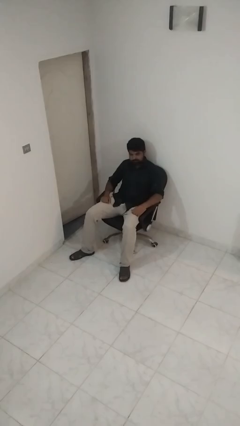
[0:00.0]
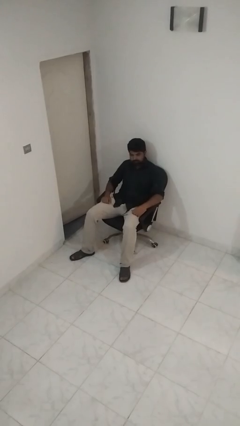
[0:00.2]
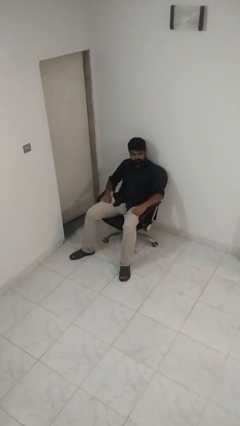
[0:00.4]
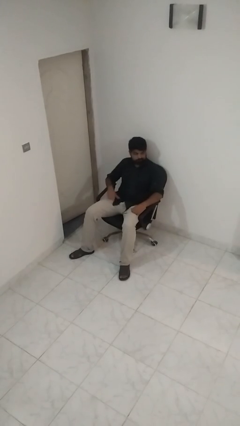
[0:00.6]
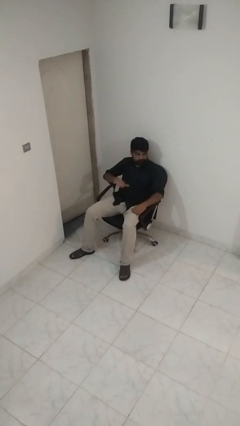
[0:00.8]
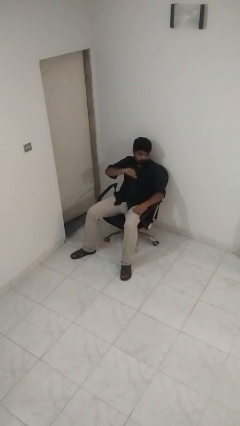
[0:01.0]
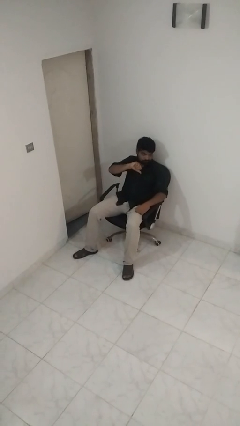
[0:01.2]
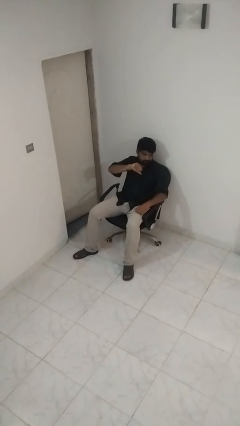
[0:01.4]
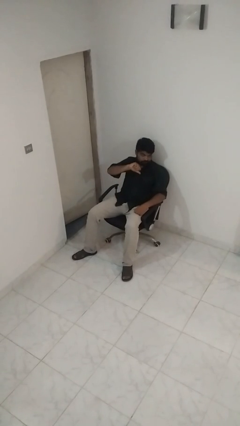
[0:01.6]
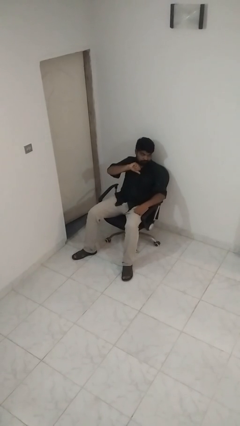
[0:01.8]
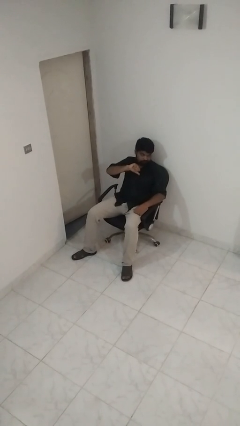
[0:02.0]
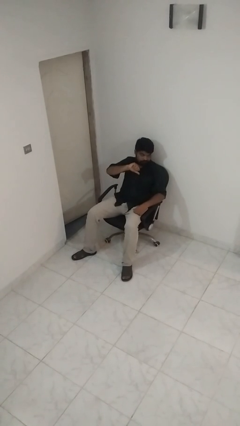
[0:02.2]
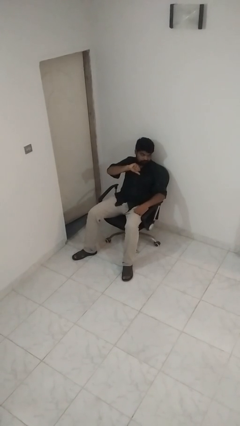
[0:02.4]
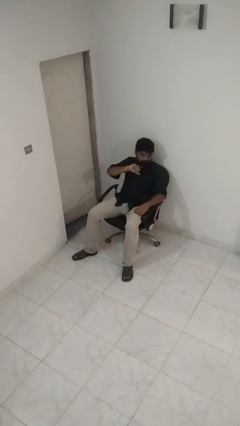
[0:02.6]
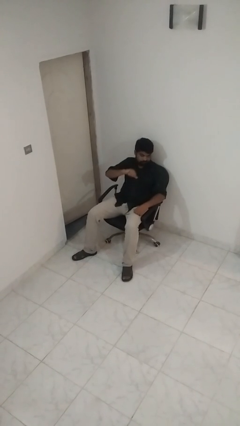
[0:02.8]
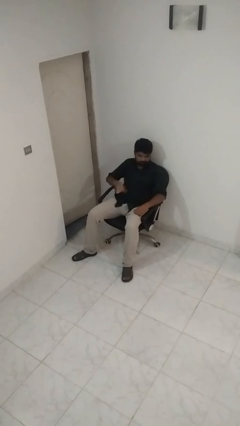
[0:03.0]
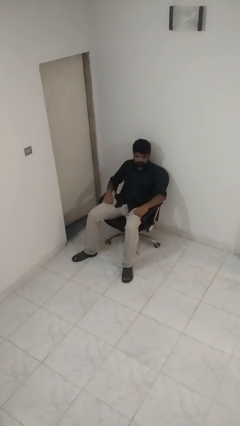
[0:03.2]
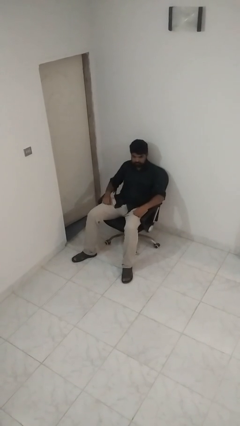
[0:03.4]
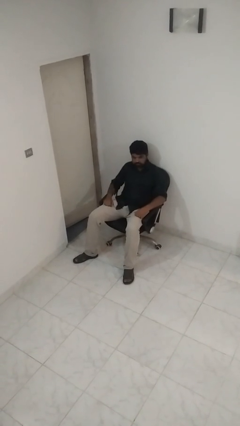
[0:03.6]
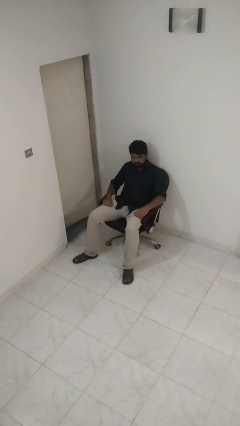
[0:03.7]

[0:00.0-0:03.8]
person gestures thumbs down

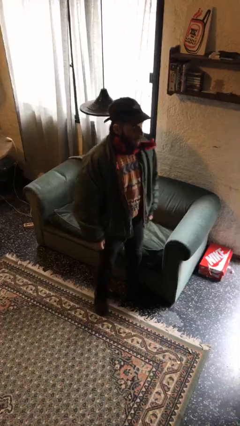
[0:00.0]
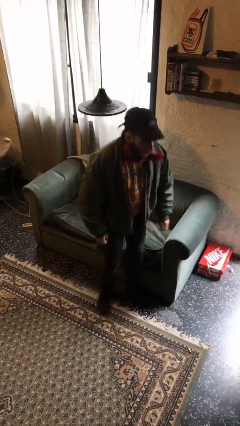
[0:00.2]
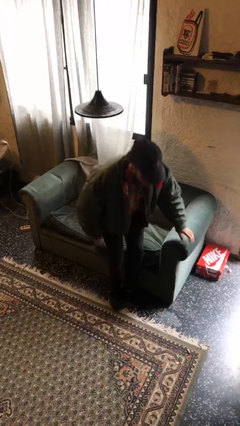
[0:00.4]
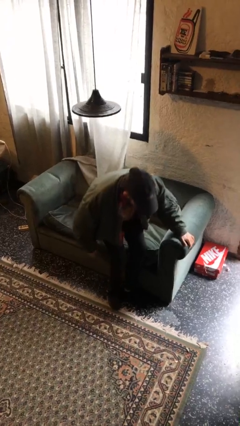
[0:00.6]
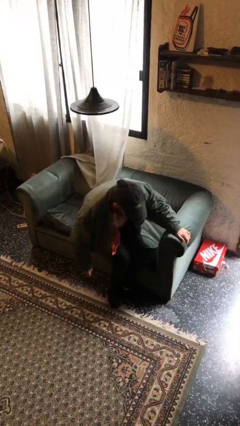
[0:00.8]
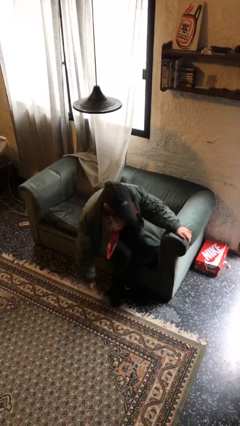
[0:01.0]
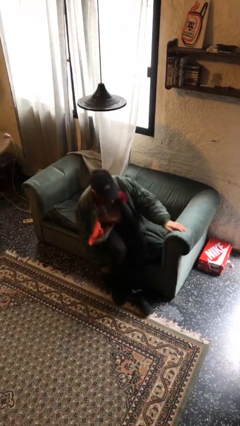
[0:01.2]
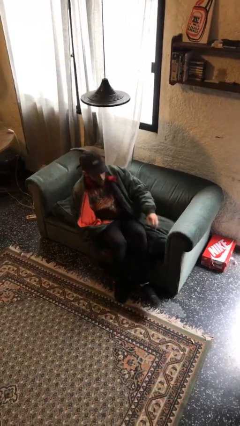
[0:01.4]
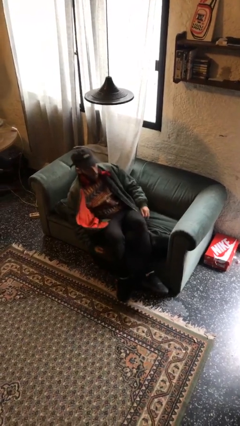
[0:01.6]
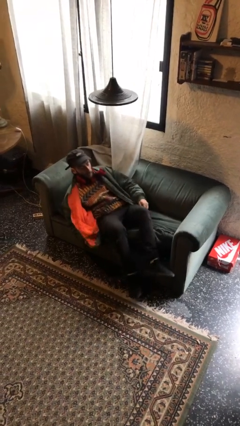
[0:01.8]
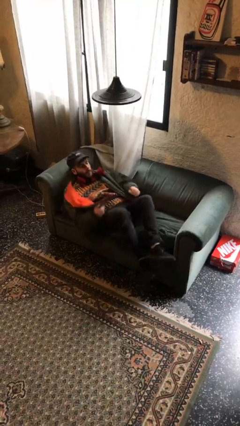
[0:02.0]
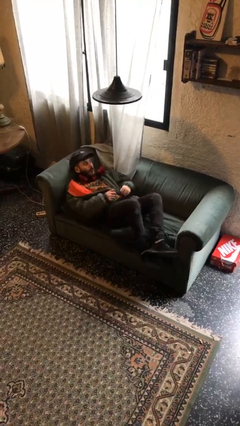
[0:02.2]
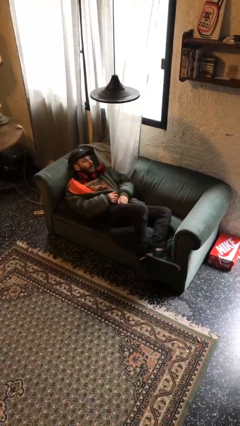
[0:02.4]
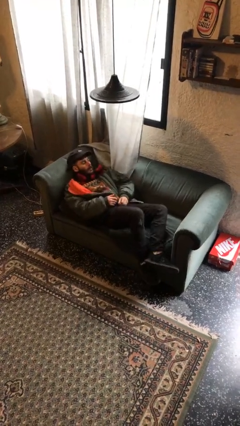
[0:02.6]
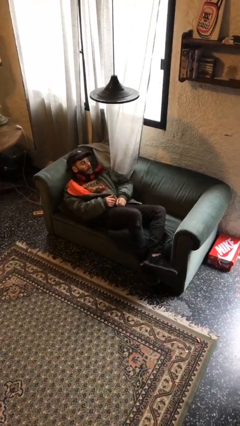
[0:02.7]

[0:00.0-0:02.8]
person lies down on couch

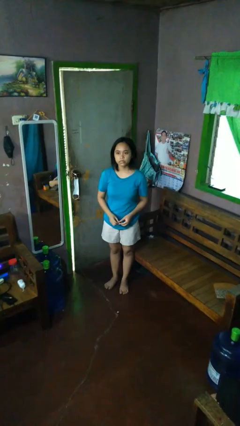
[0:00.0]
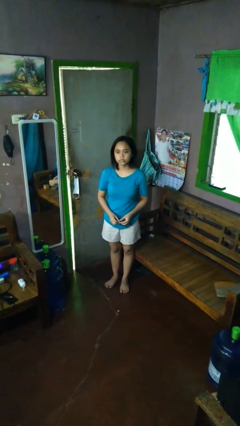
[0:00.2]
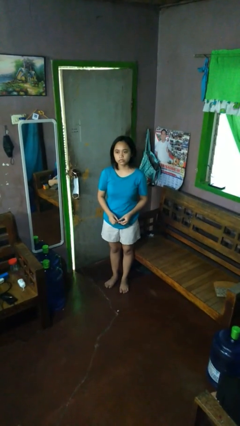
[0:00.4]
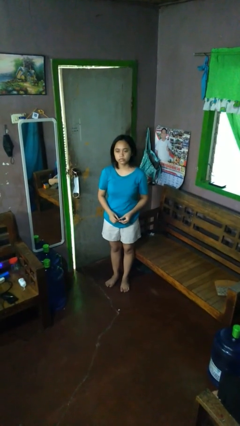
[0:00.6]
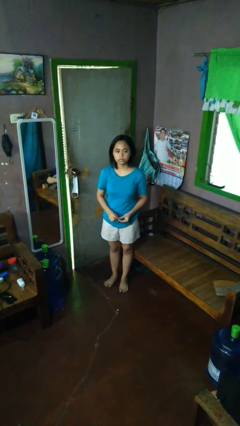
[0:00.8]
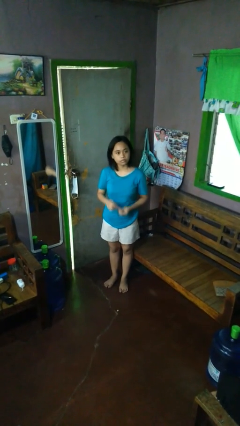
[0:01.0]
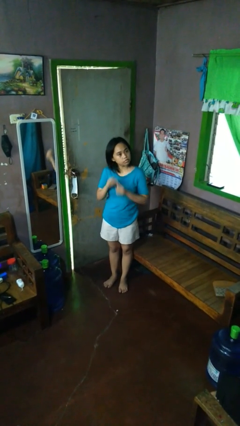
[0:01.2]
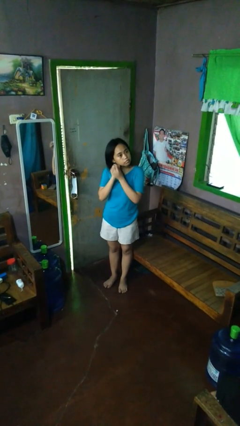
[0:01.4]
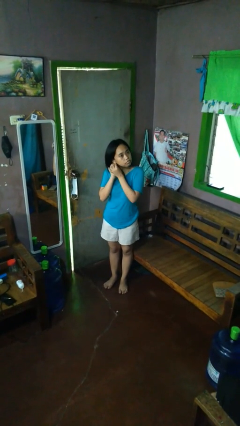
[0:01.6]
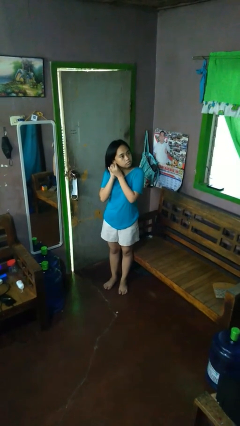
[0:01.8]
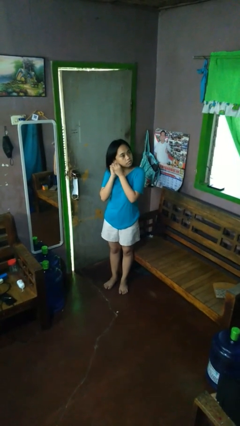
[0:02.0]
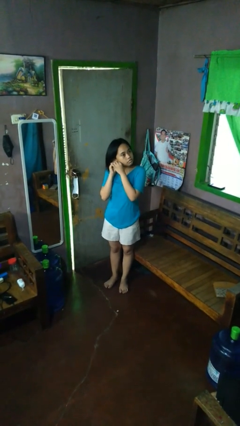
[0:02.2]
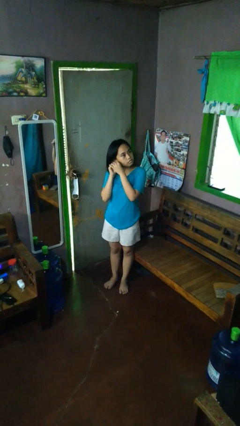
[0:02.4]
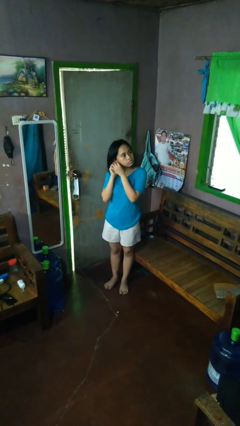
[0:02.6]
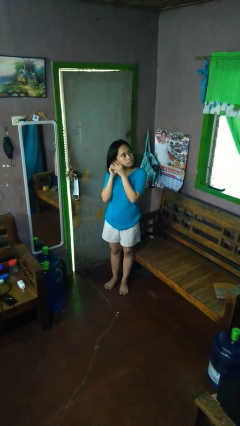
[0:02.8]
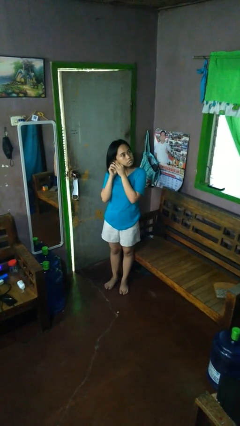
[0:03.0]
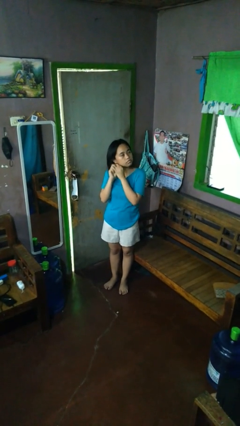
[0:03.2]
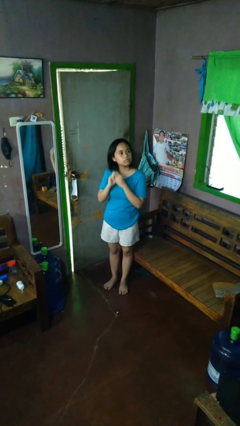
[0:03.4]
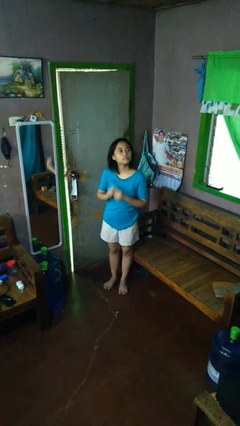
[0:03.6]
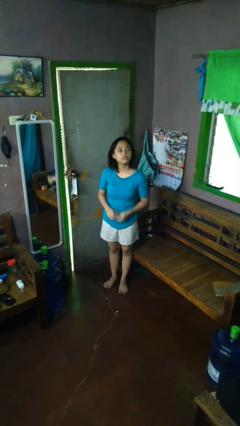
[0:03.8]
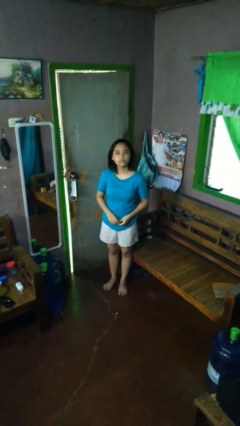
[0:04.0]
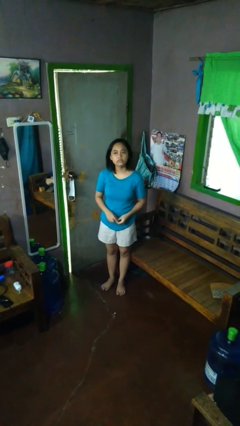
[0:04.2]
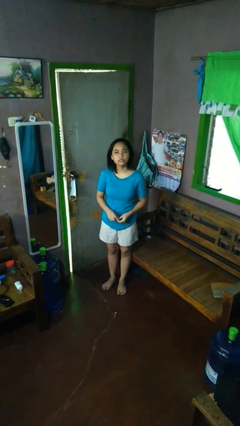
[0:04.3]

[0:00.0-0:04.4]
person puts on earrings

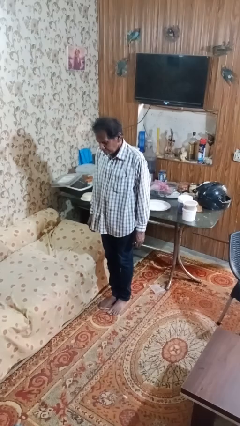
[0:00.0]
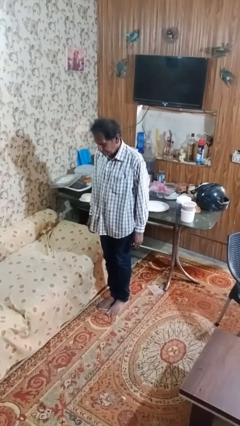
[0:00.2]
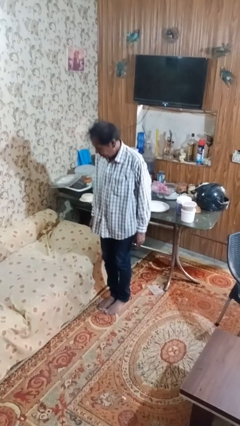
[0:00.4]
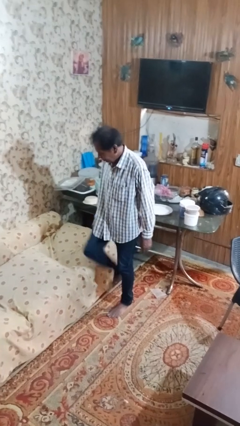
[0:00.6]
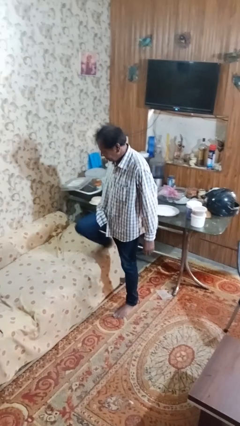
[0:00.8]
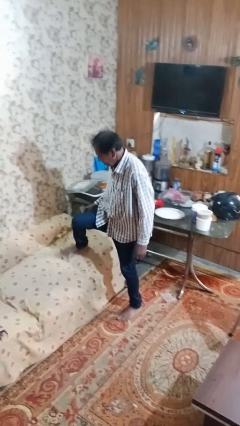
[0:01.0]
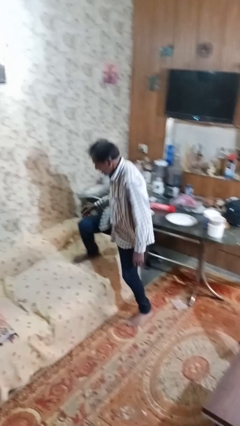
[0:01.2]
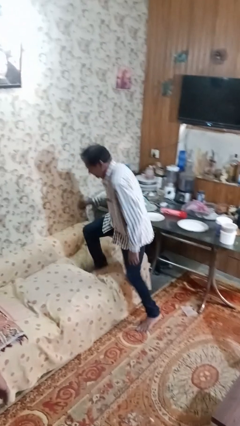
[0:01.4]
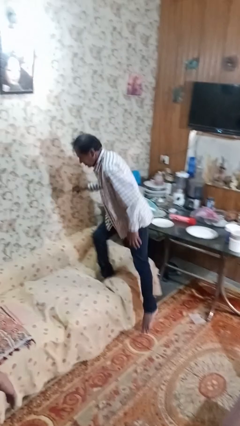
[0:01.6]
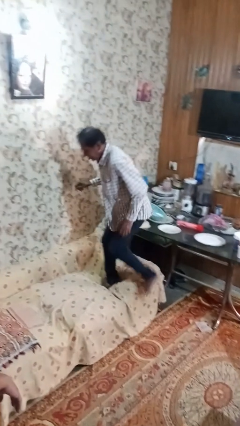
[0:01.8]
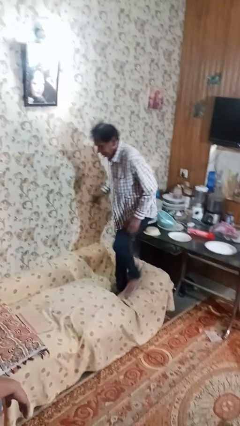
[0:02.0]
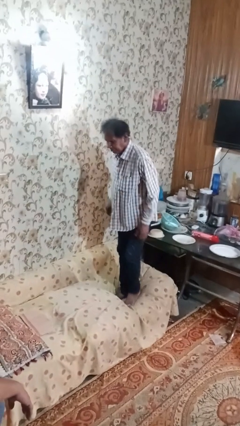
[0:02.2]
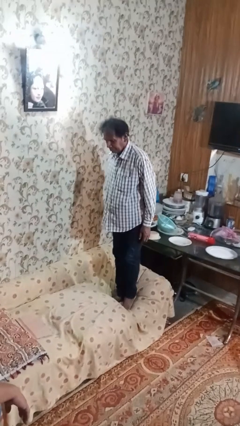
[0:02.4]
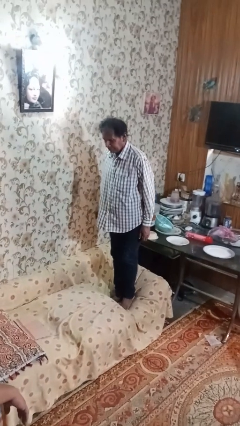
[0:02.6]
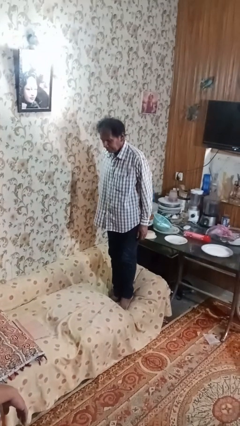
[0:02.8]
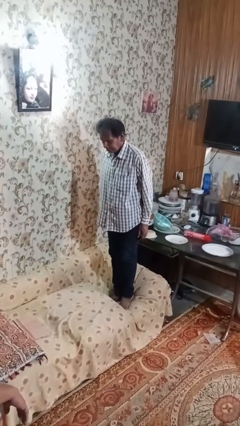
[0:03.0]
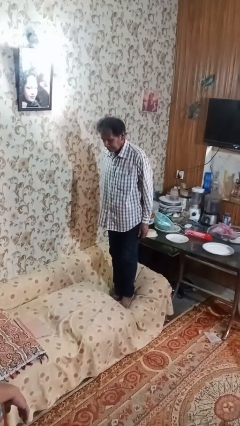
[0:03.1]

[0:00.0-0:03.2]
person climbs on couch

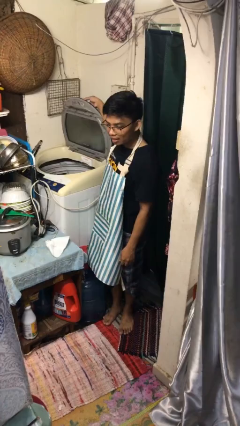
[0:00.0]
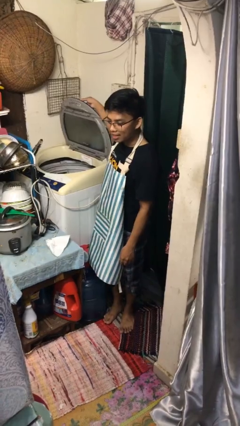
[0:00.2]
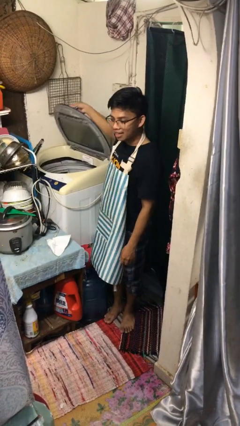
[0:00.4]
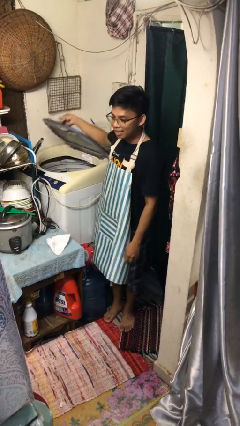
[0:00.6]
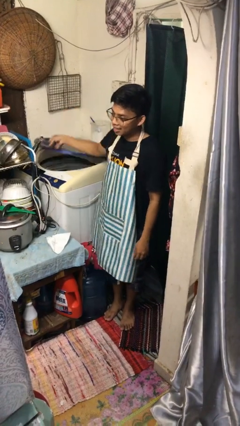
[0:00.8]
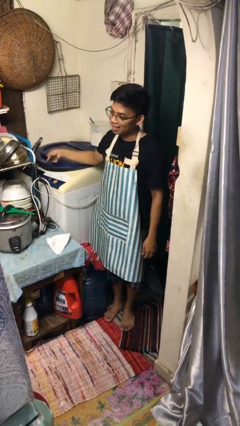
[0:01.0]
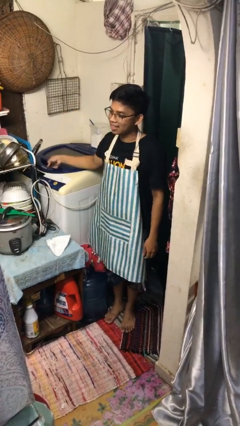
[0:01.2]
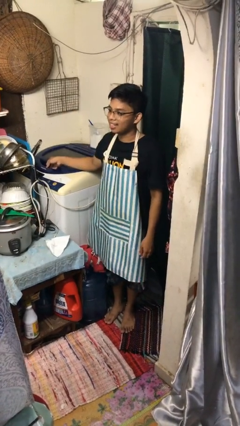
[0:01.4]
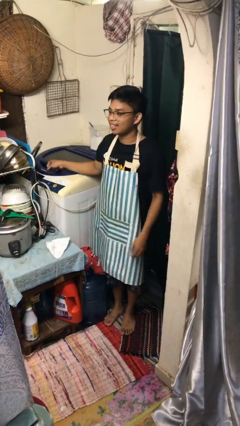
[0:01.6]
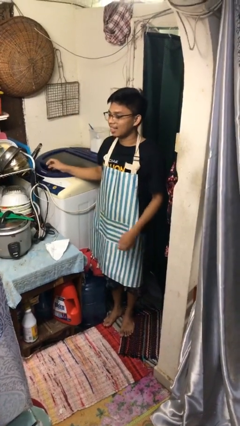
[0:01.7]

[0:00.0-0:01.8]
person closes clothes washer

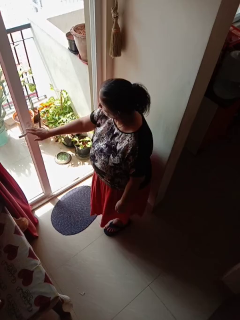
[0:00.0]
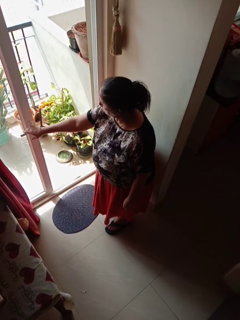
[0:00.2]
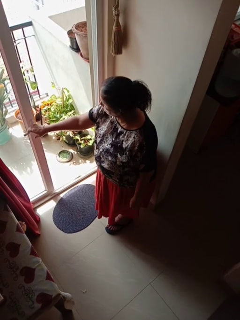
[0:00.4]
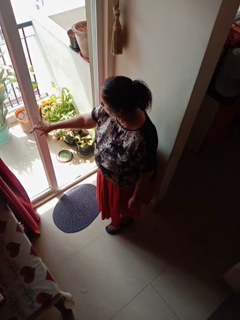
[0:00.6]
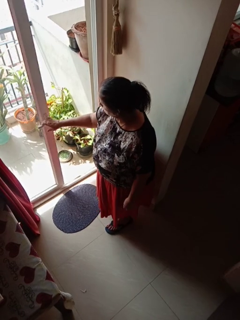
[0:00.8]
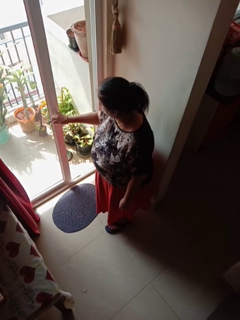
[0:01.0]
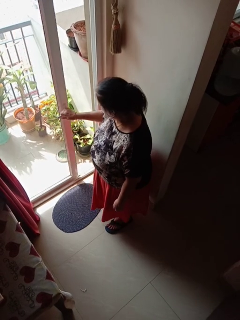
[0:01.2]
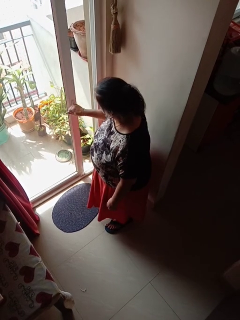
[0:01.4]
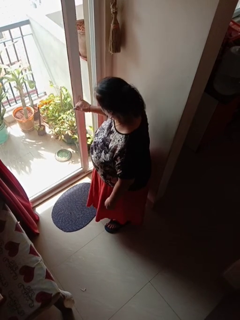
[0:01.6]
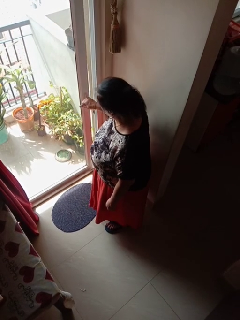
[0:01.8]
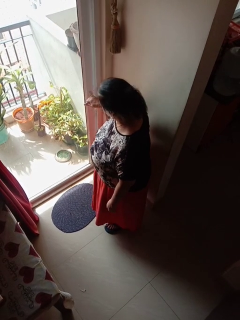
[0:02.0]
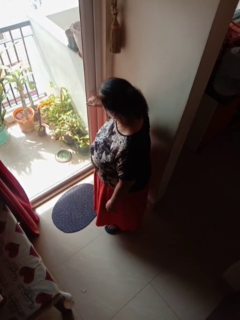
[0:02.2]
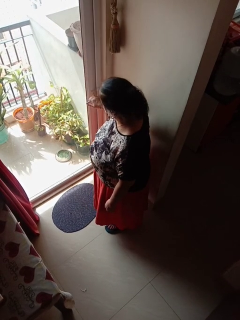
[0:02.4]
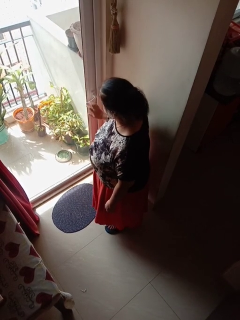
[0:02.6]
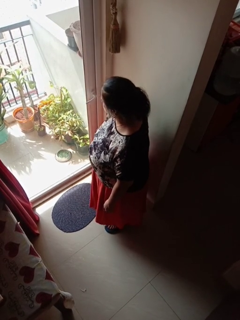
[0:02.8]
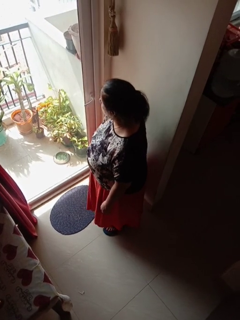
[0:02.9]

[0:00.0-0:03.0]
person closes sliding door
